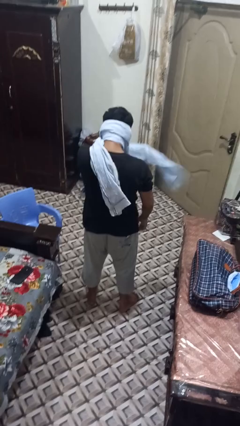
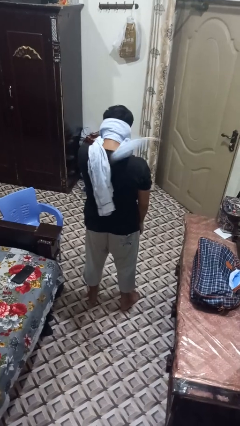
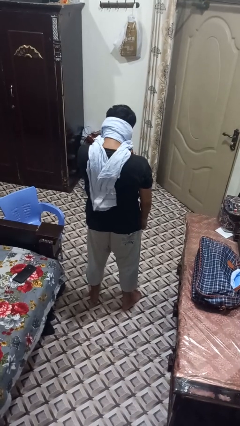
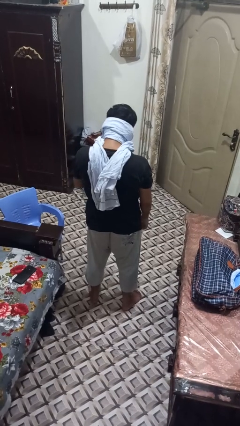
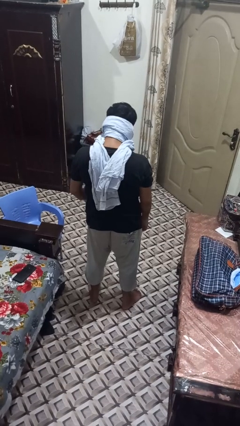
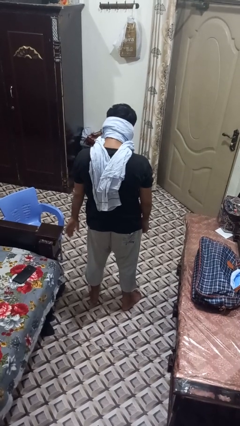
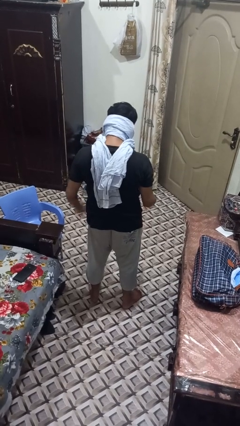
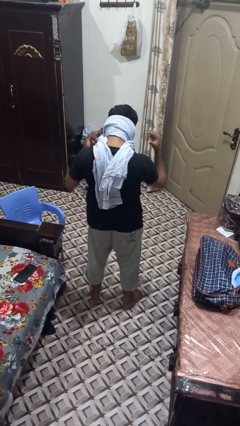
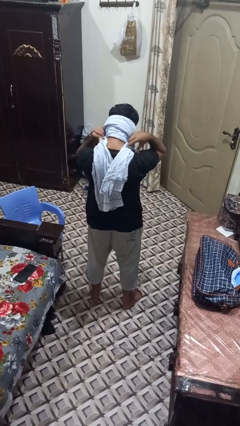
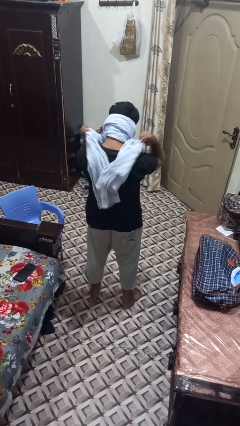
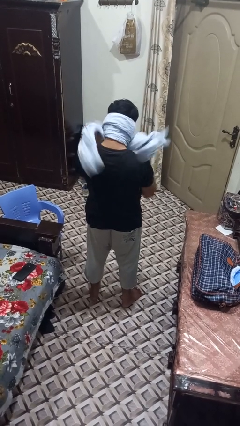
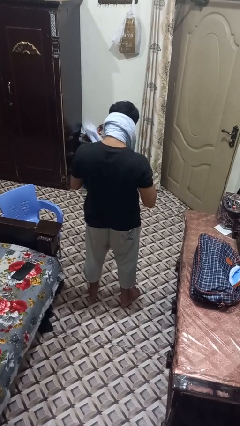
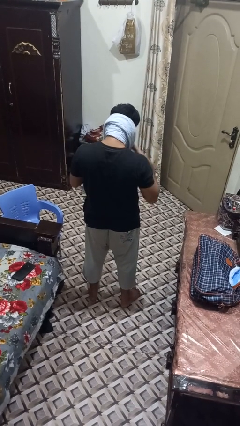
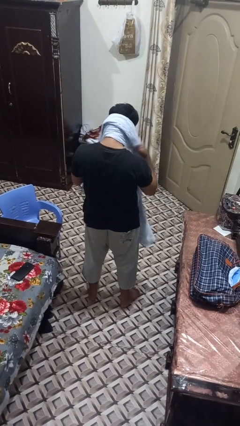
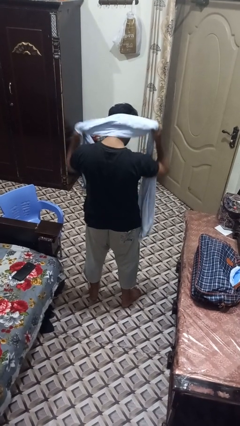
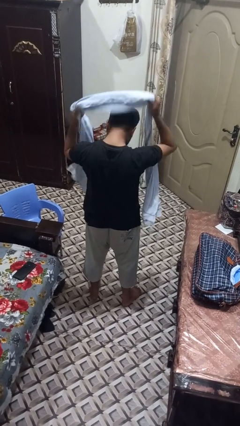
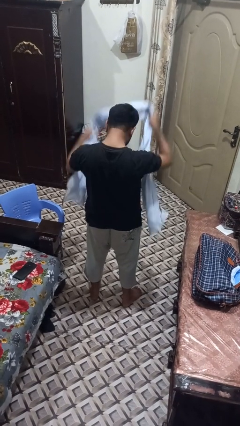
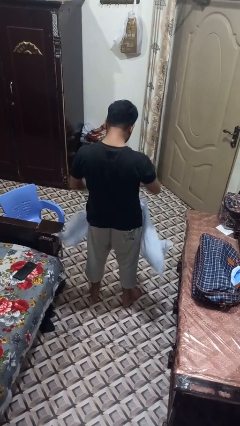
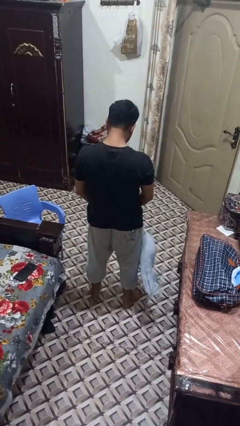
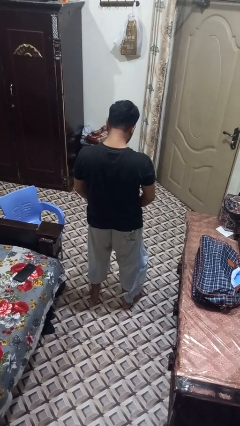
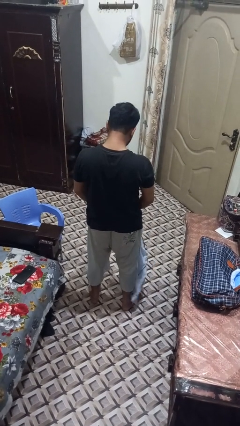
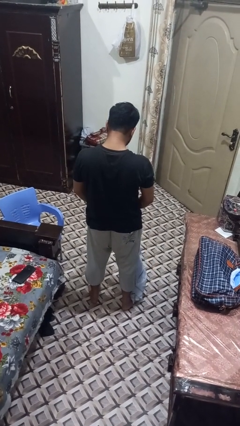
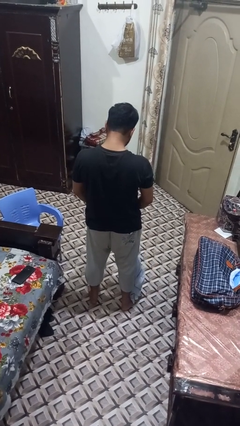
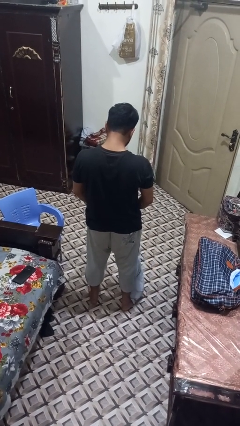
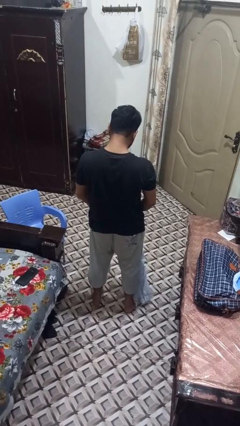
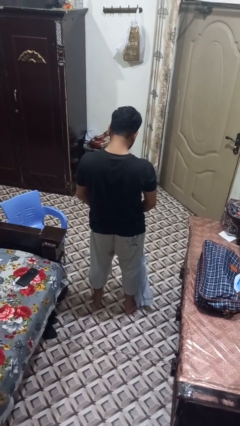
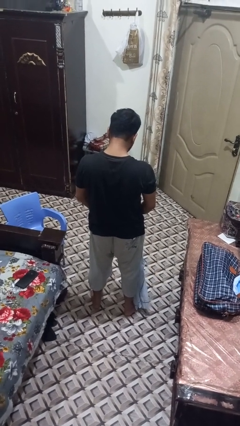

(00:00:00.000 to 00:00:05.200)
person takes off scarf

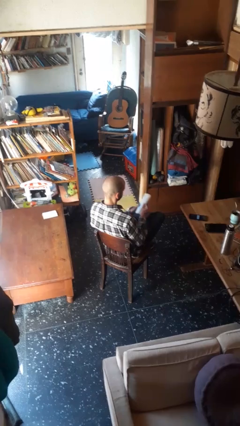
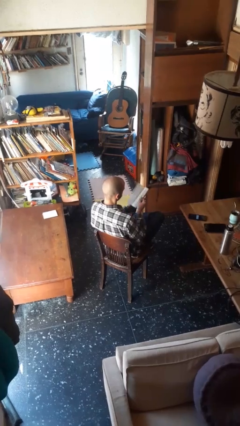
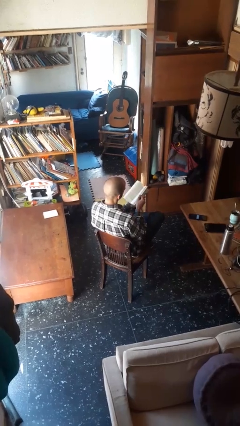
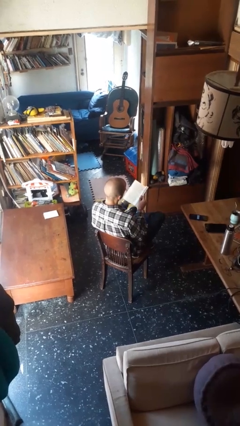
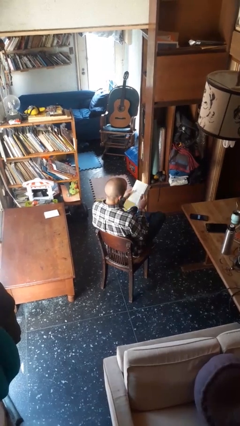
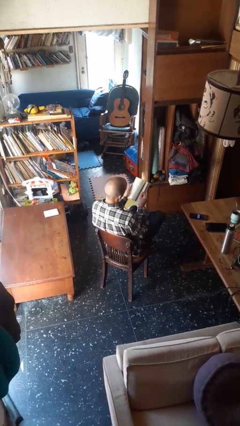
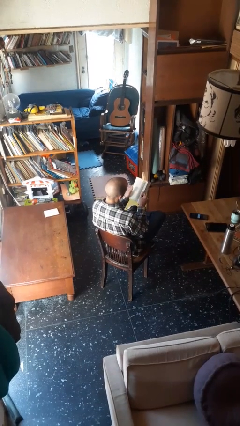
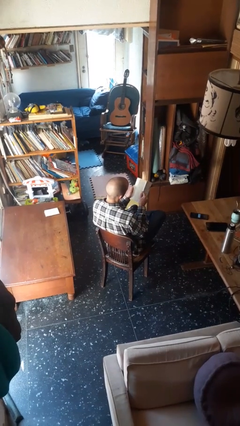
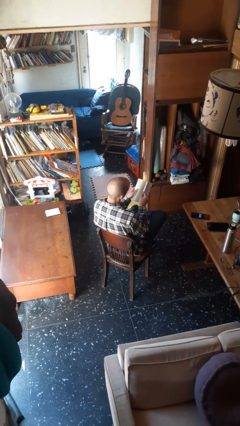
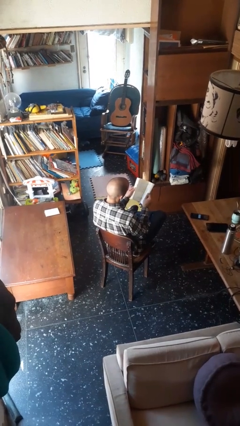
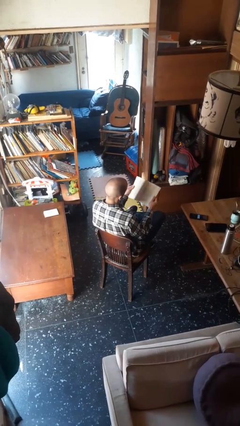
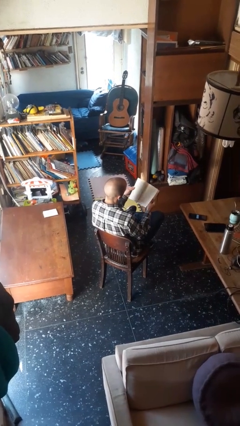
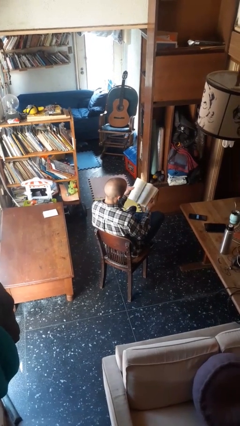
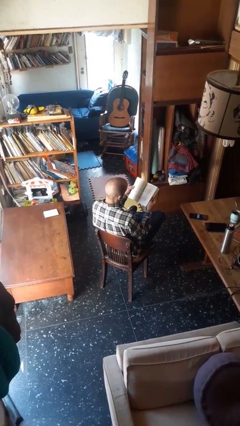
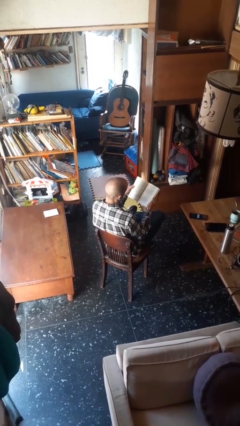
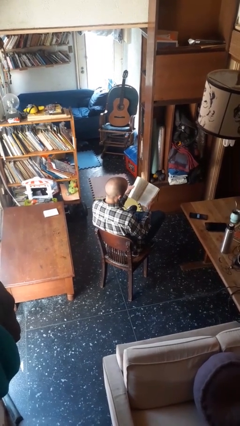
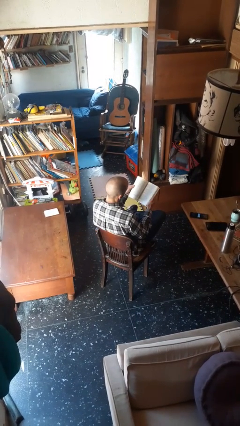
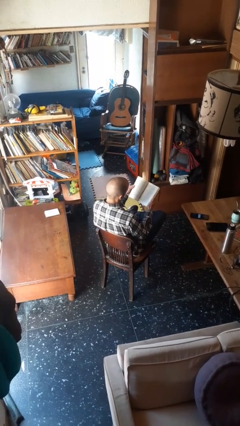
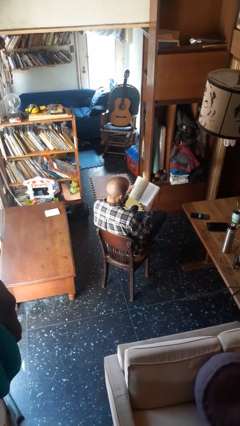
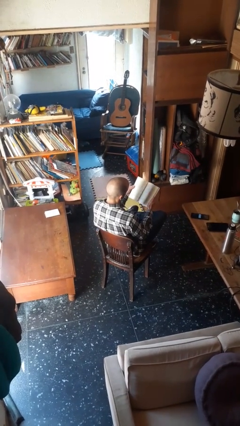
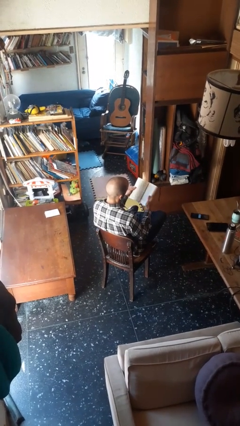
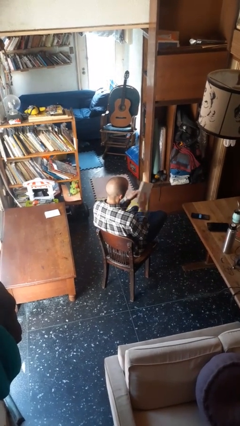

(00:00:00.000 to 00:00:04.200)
person reads book

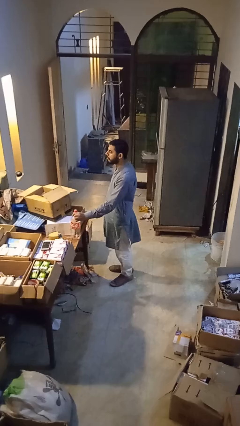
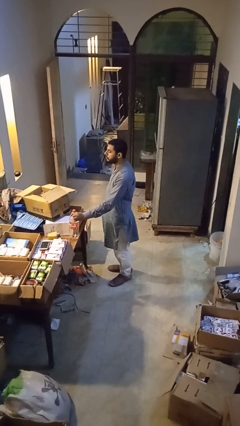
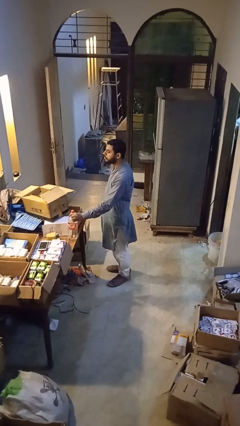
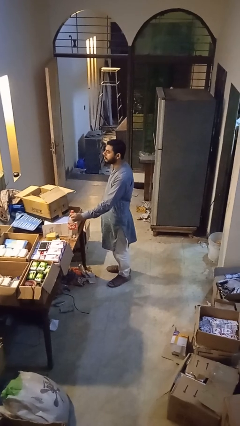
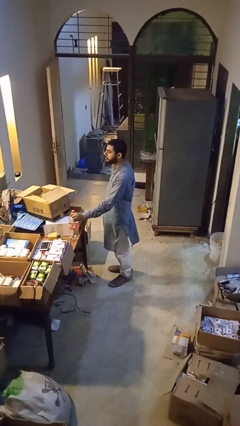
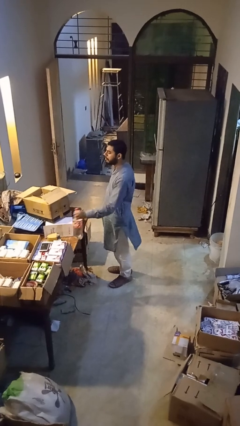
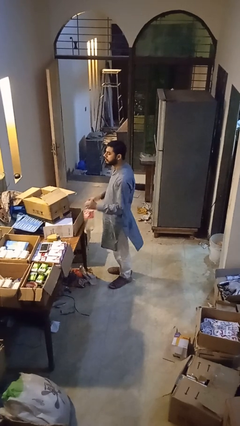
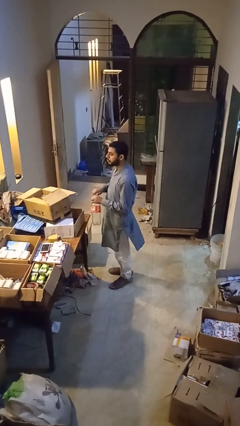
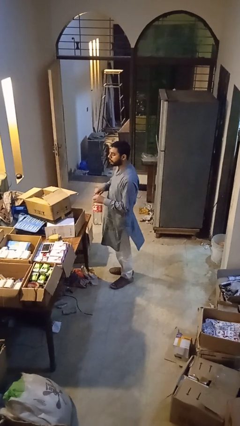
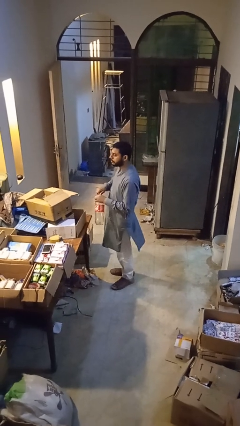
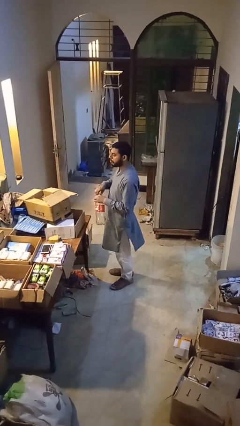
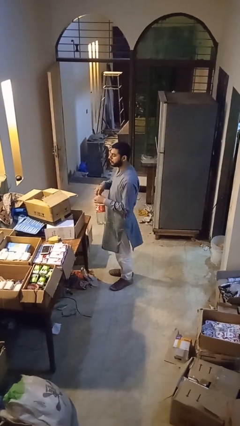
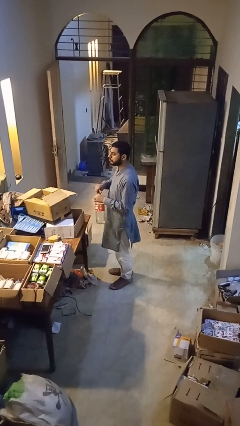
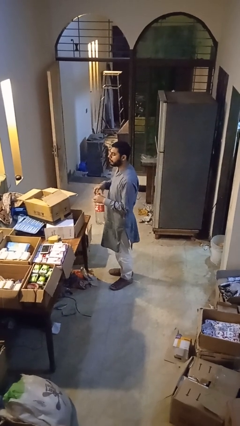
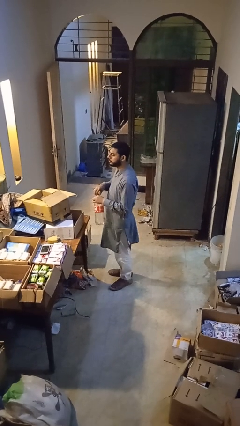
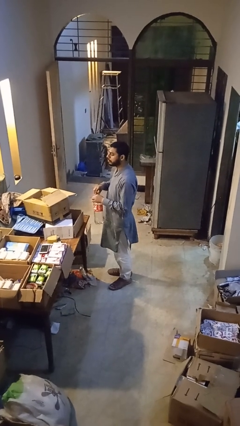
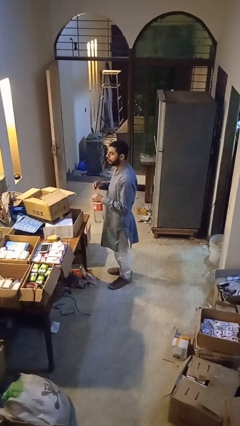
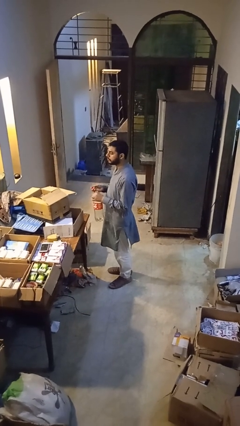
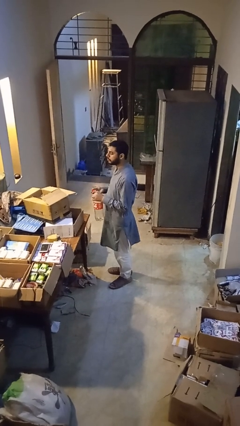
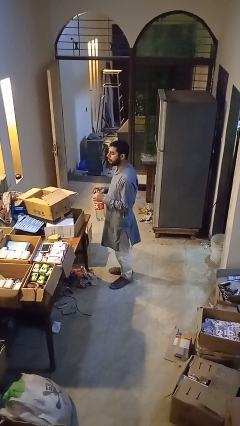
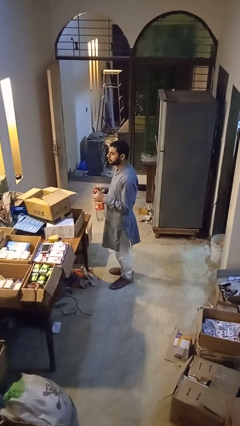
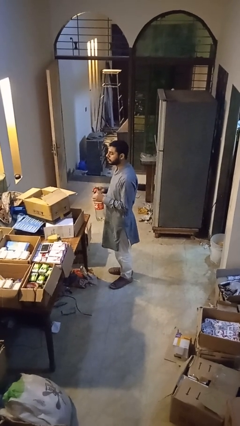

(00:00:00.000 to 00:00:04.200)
person unscrews lid from bottle

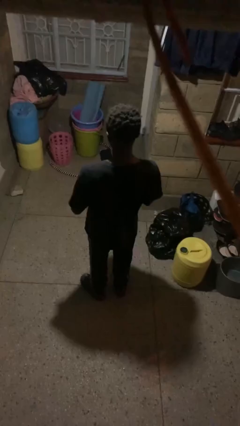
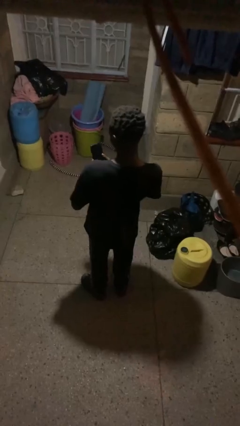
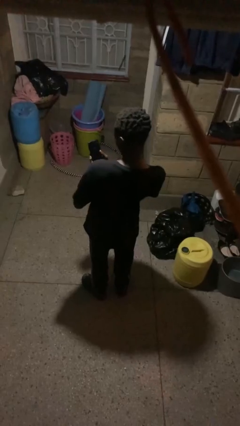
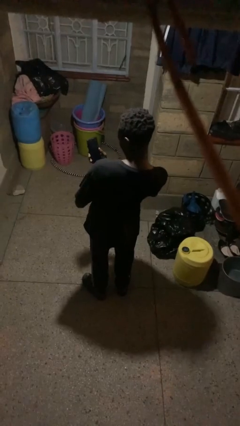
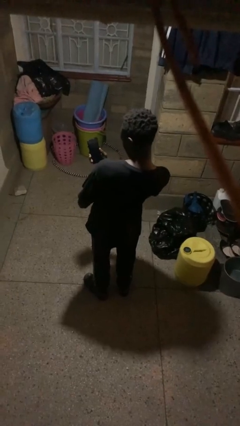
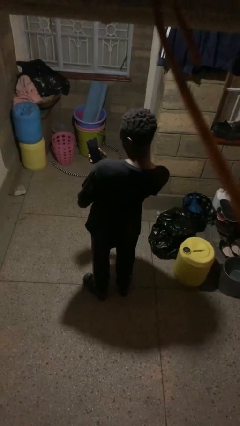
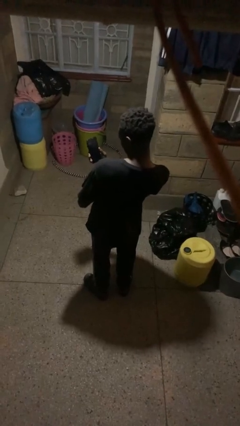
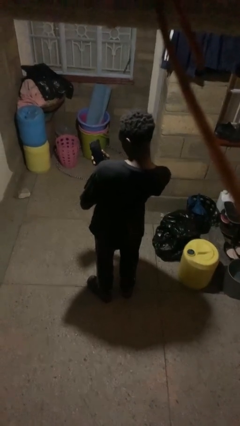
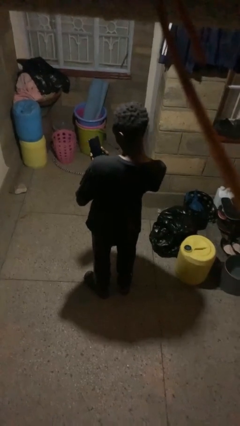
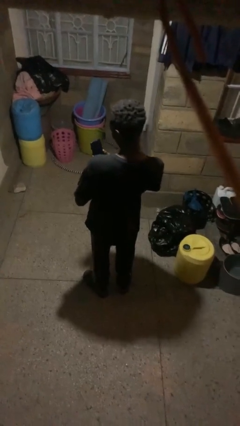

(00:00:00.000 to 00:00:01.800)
person takes selfie

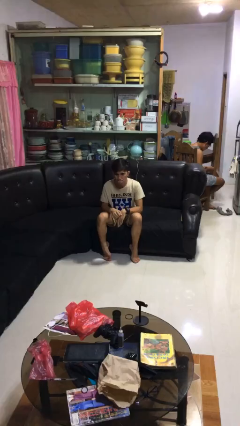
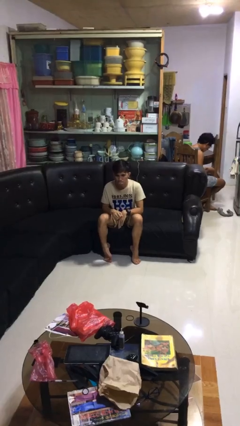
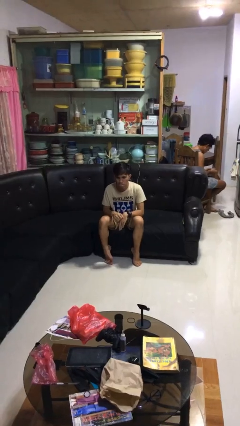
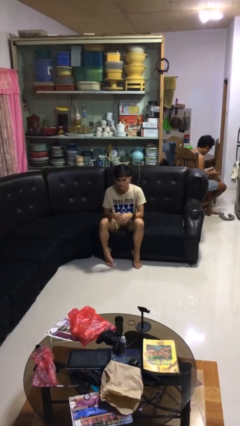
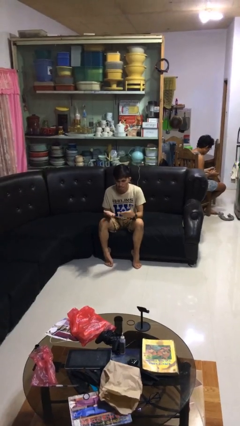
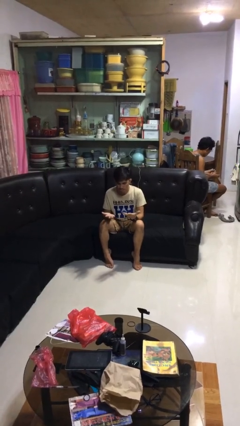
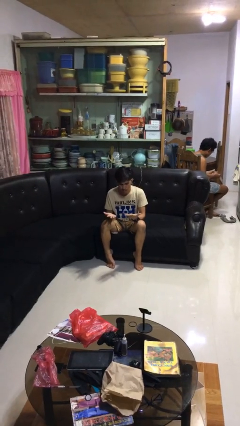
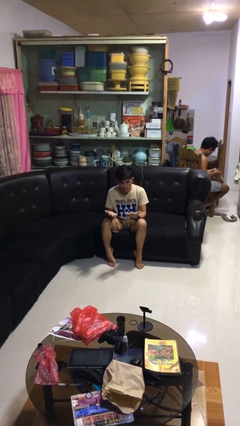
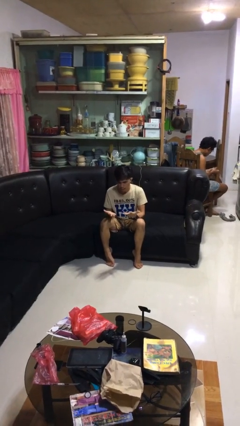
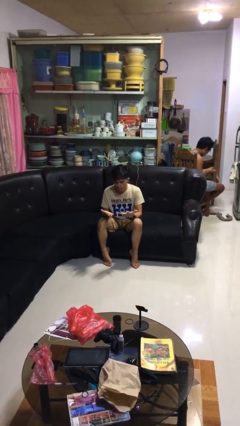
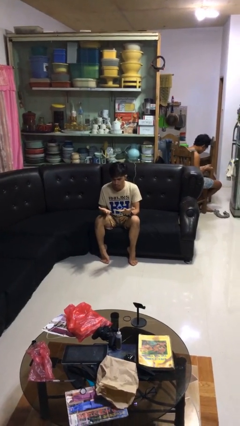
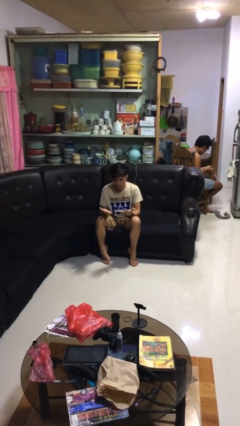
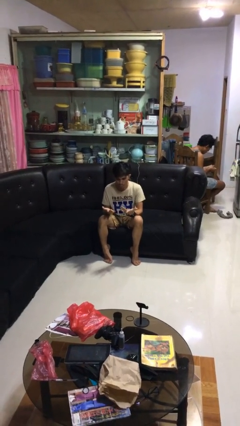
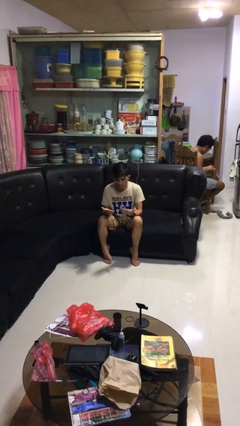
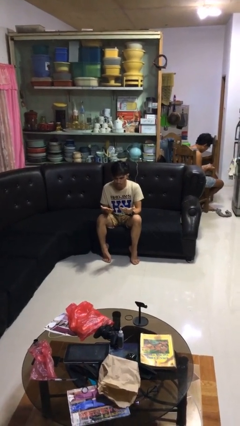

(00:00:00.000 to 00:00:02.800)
person looks at hands in lap
